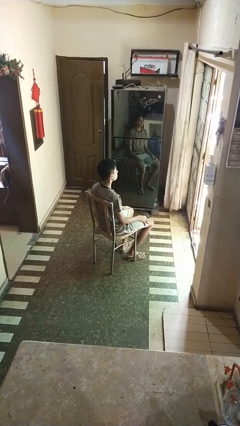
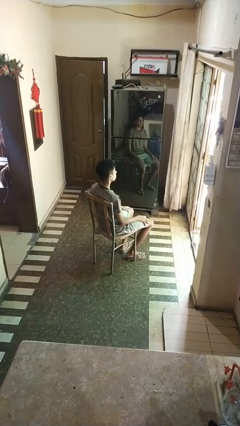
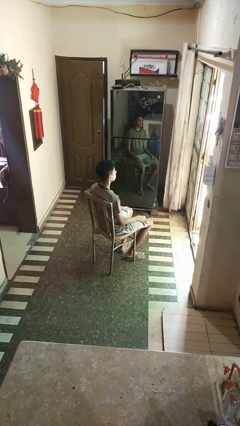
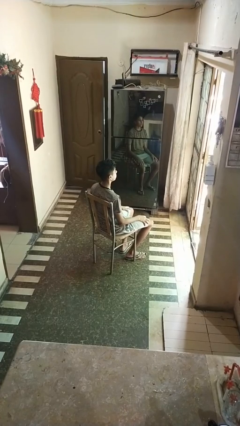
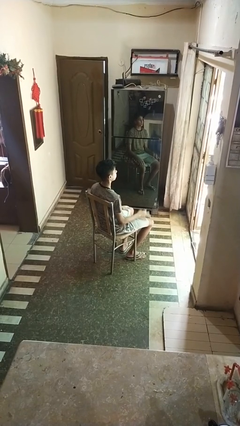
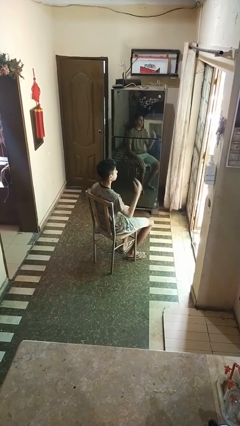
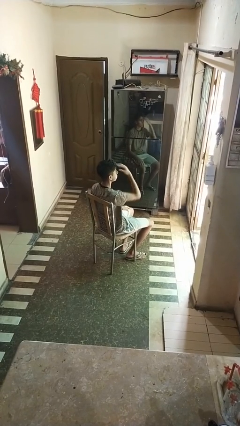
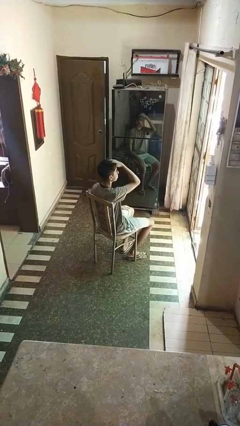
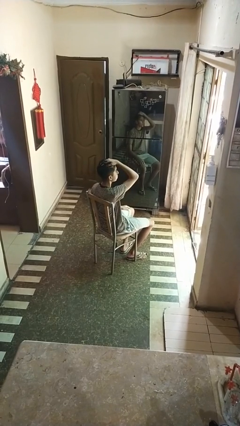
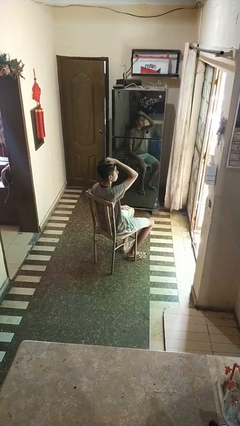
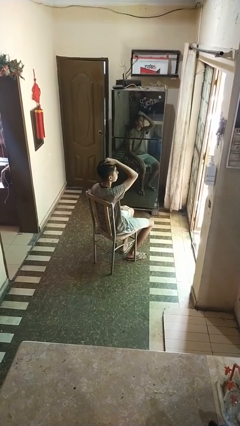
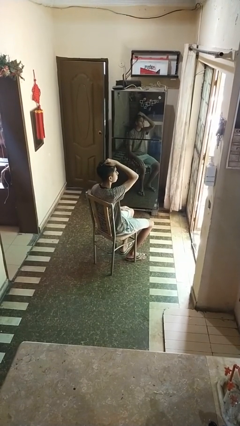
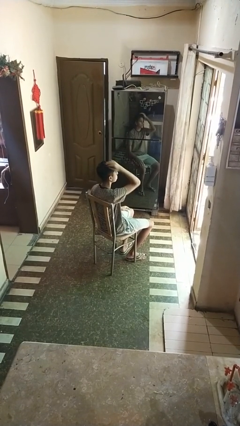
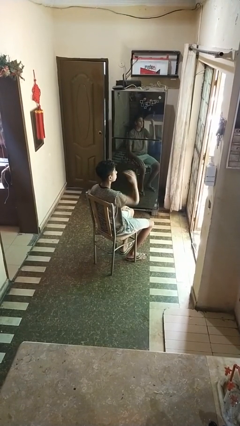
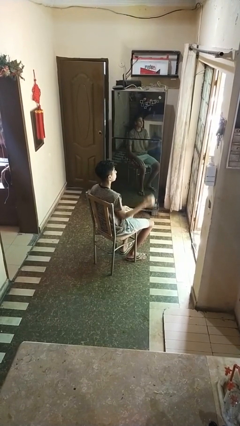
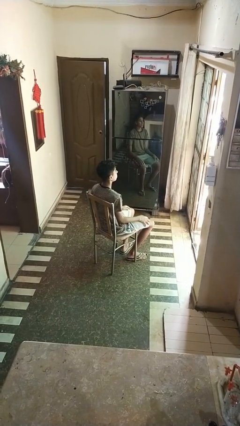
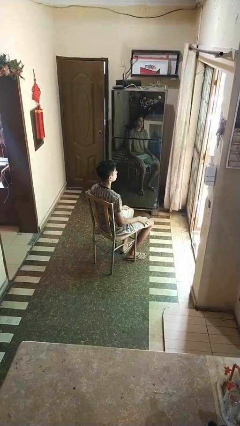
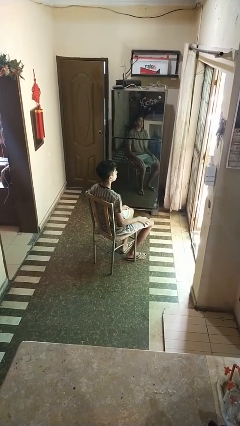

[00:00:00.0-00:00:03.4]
person strokes hair

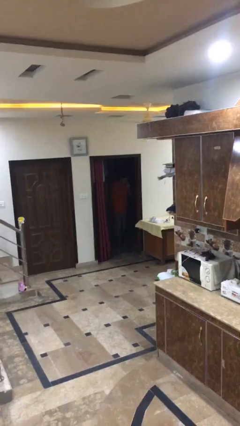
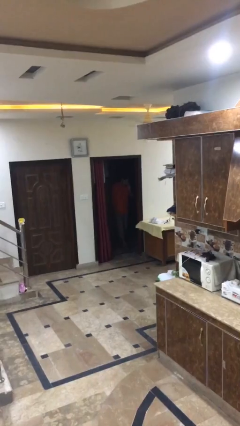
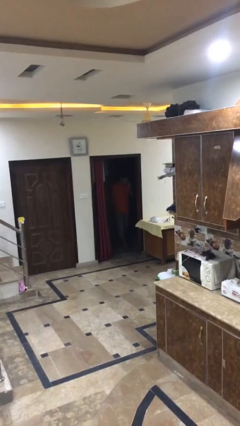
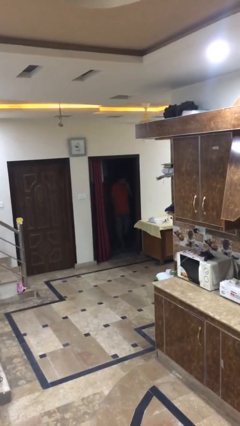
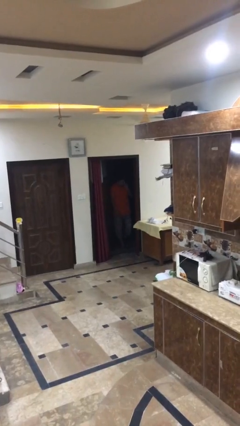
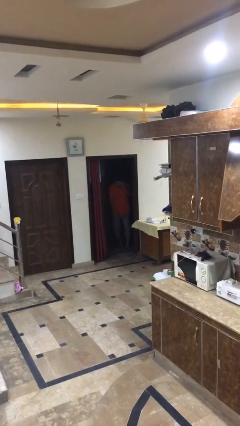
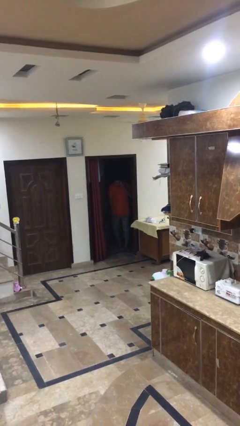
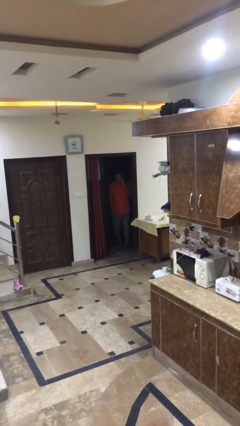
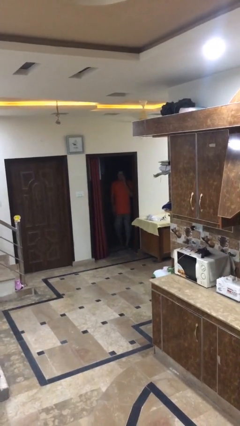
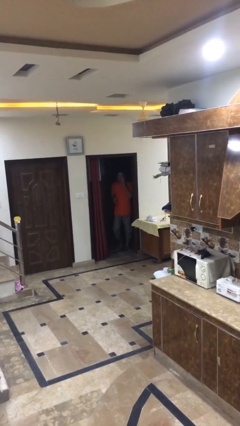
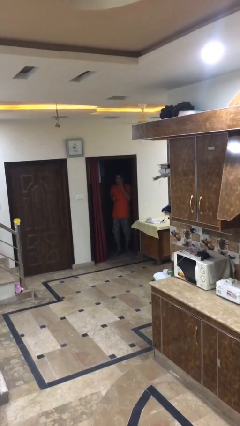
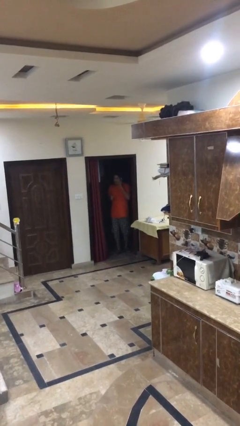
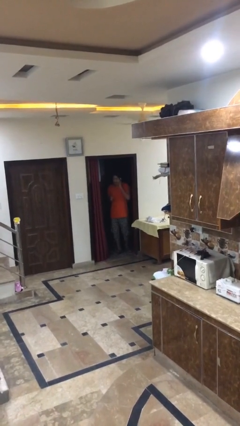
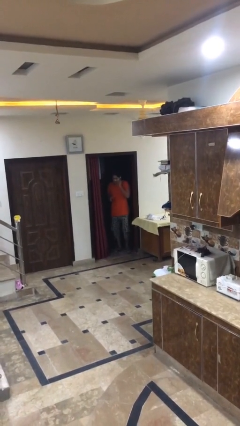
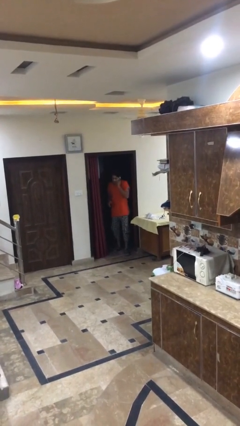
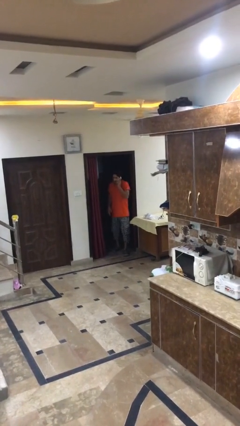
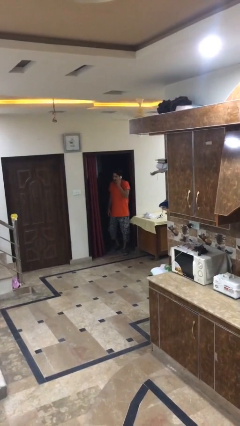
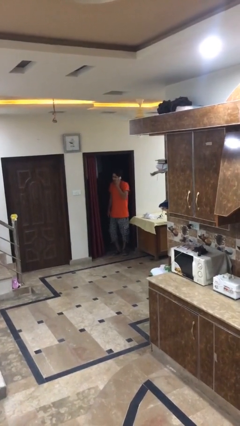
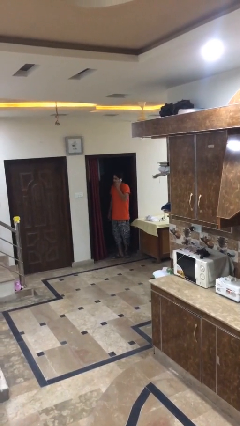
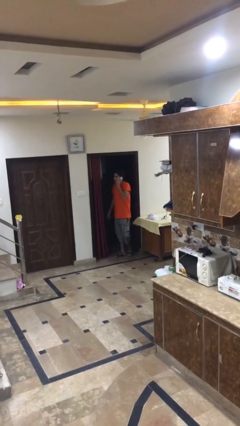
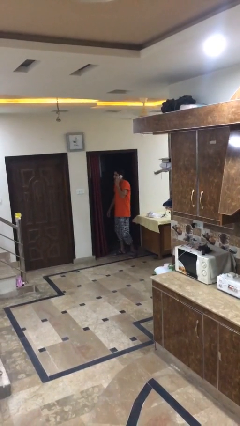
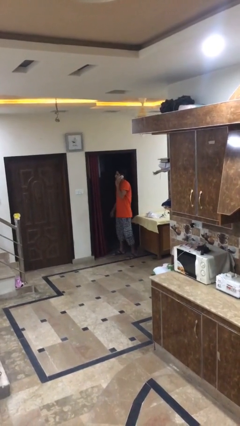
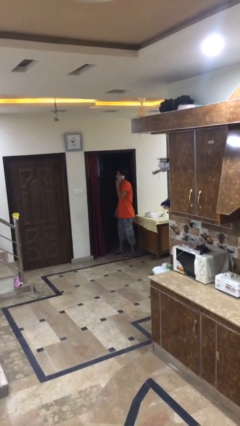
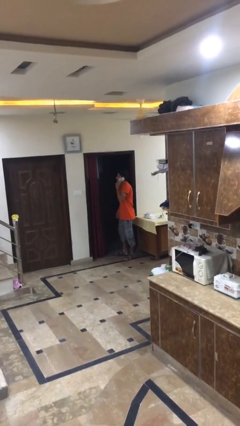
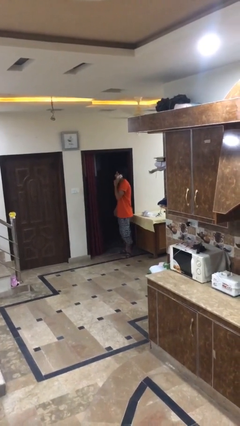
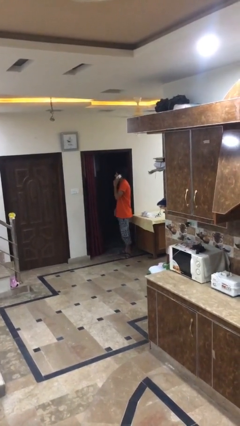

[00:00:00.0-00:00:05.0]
person enters scene through structure

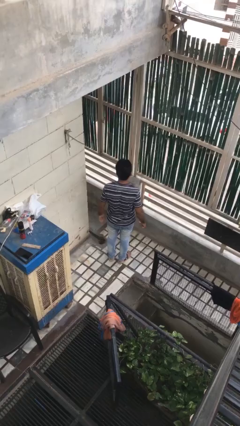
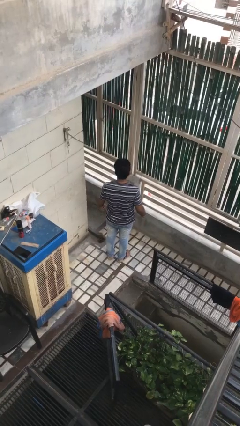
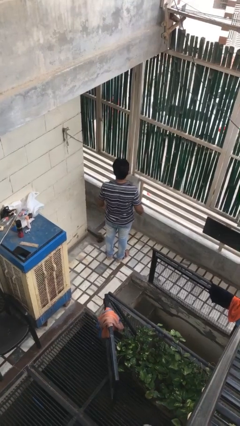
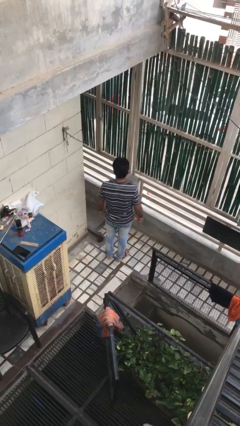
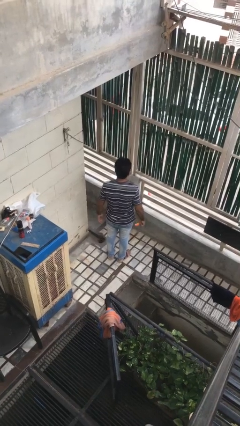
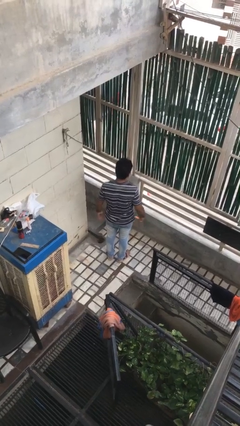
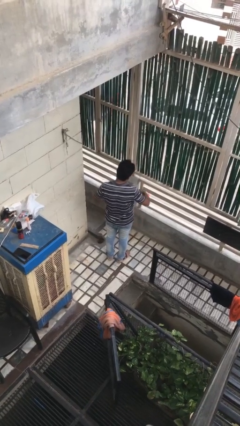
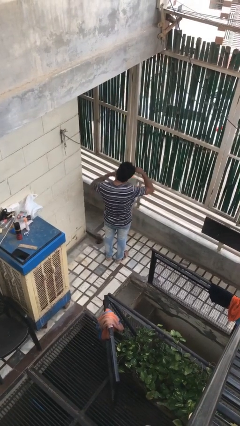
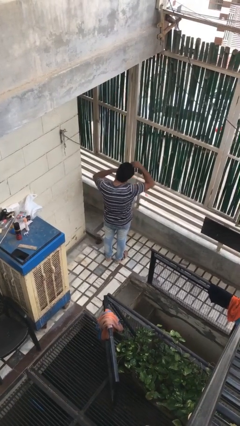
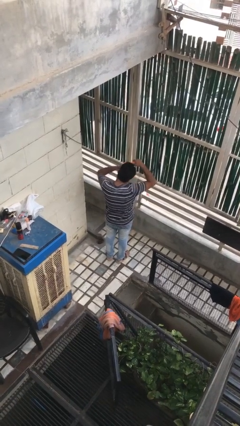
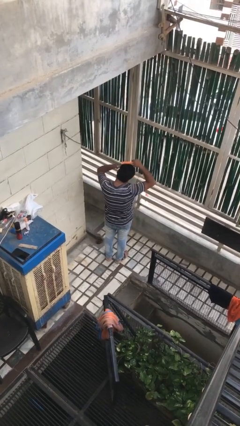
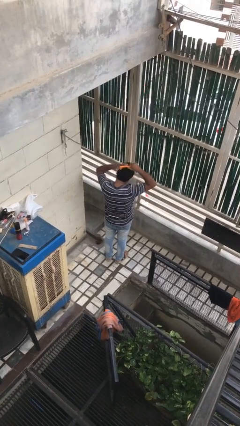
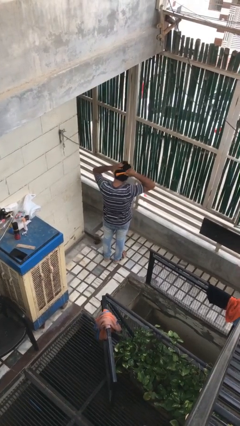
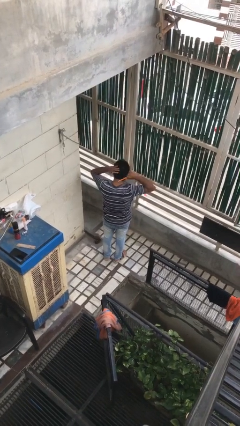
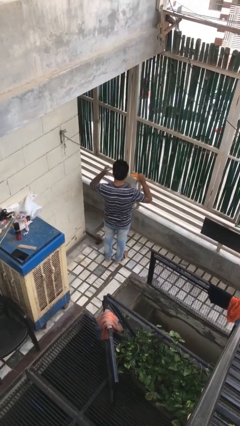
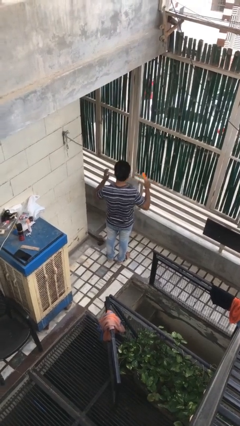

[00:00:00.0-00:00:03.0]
person brushes hair

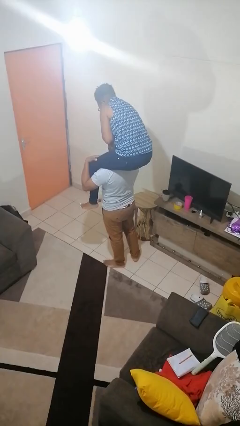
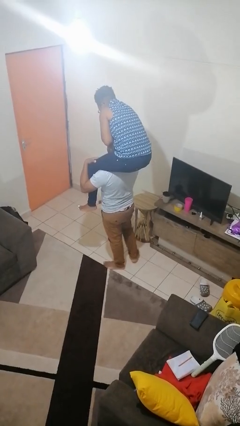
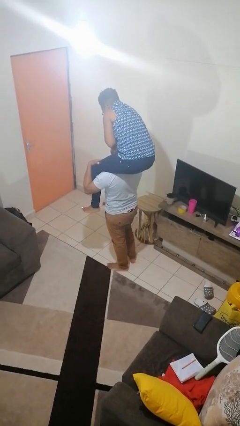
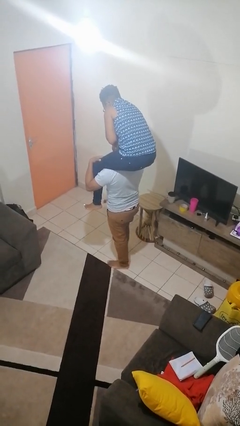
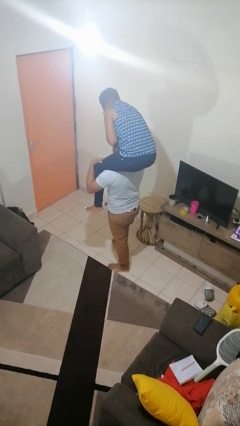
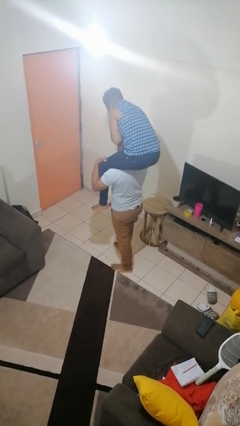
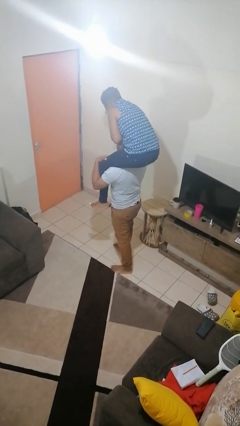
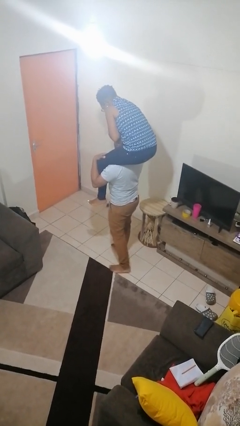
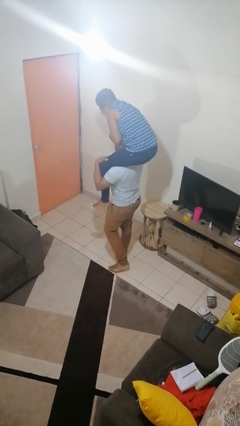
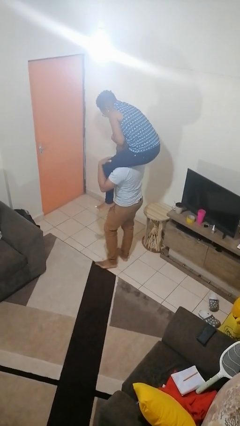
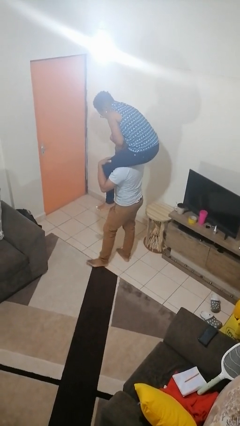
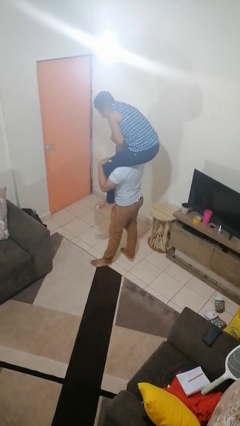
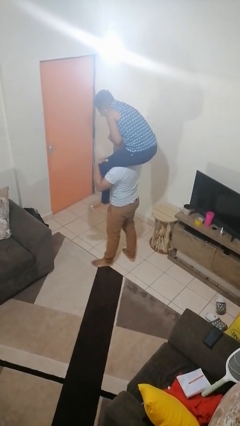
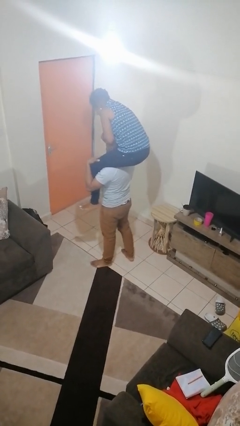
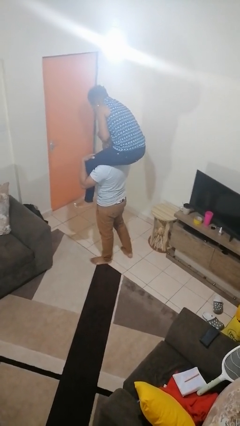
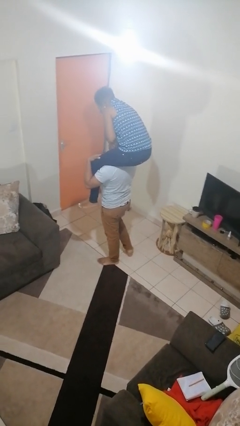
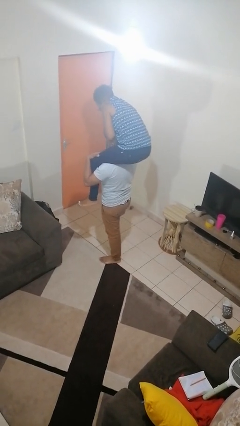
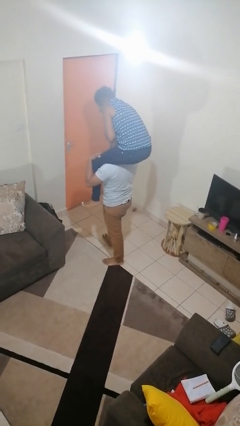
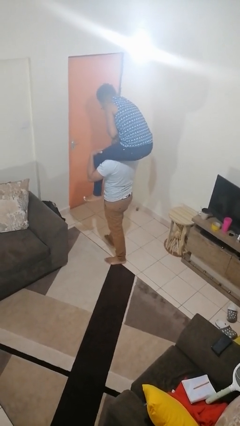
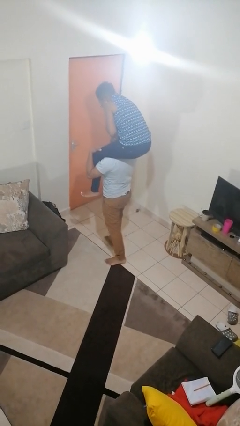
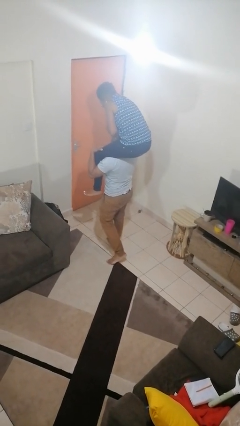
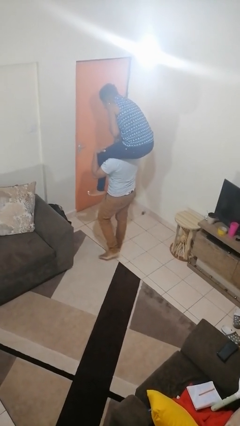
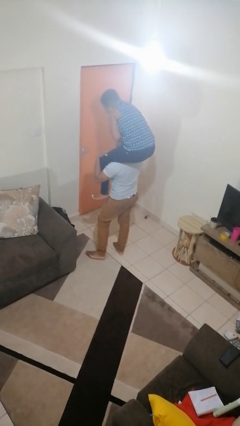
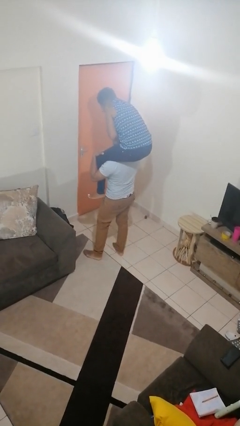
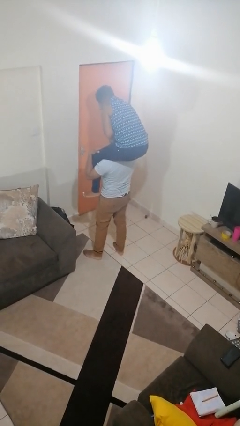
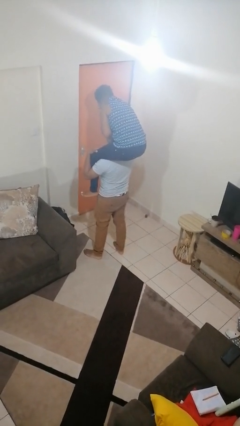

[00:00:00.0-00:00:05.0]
person carries person on shoulders

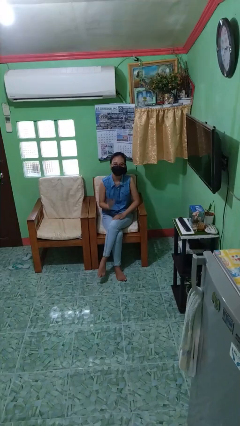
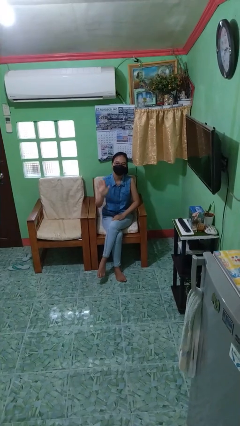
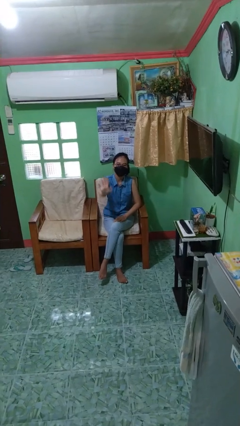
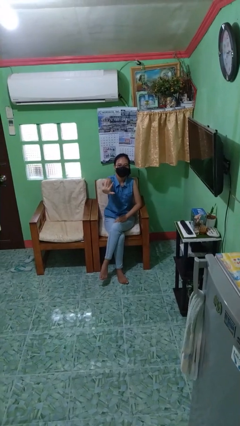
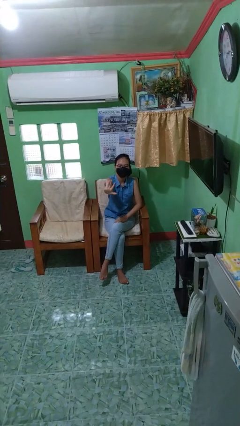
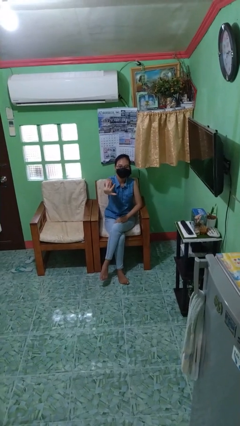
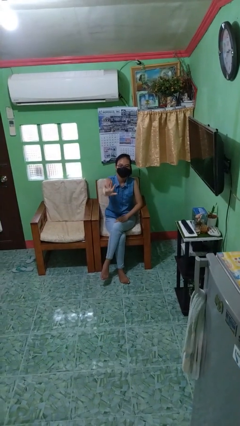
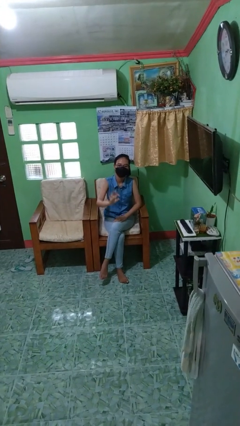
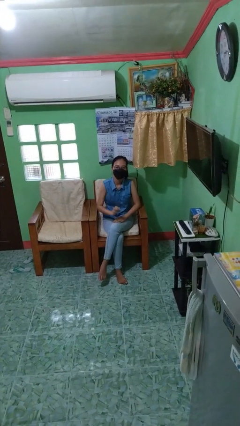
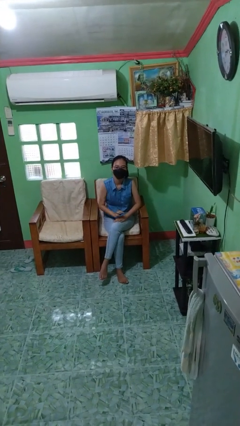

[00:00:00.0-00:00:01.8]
person gestures stop
